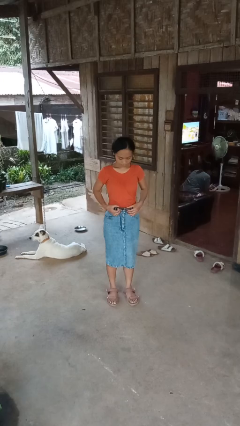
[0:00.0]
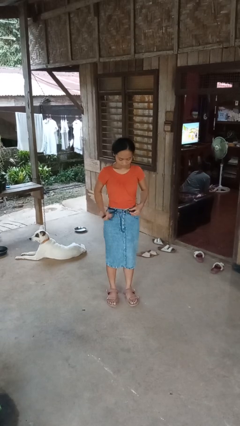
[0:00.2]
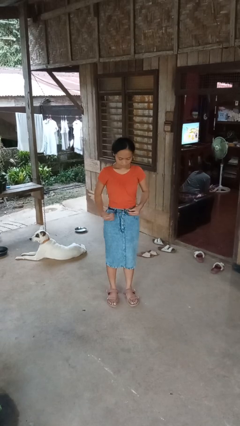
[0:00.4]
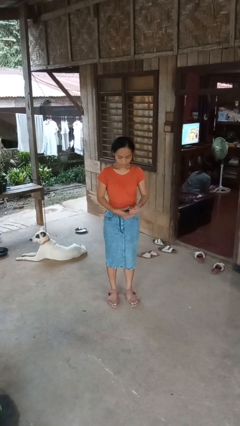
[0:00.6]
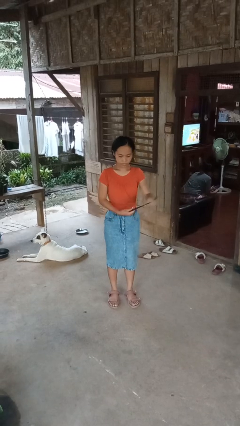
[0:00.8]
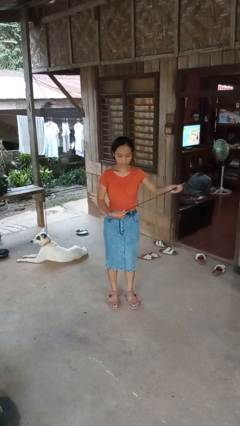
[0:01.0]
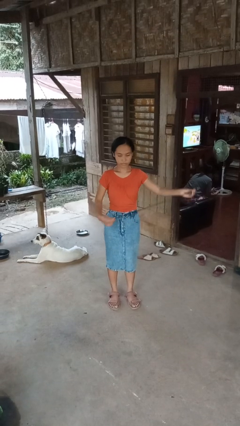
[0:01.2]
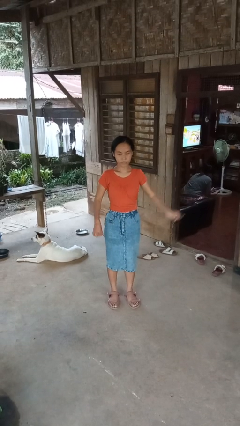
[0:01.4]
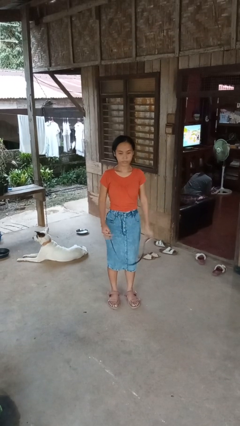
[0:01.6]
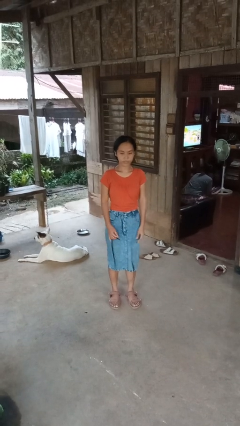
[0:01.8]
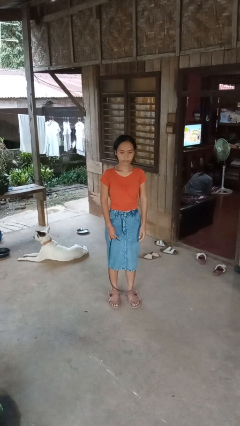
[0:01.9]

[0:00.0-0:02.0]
person takes off belt

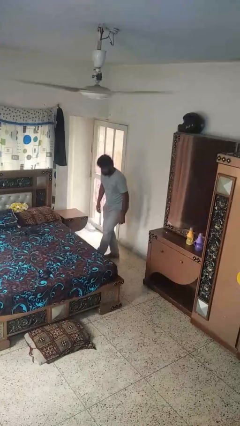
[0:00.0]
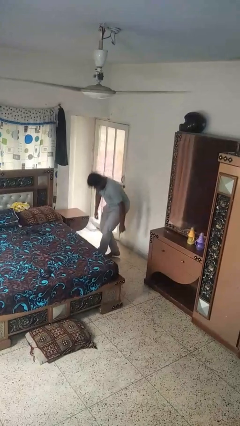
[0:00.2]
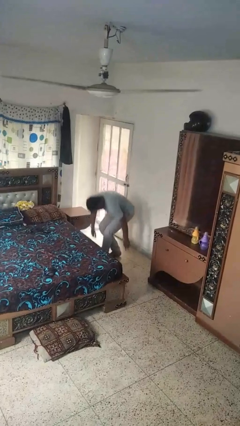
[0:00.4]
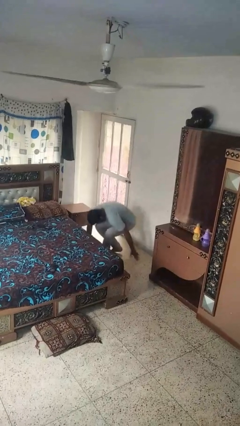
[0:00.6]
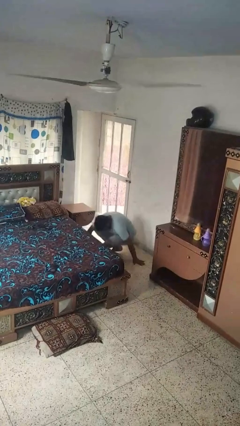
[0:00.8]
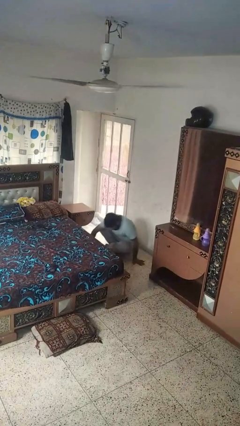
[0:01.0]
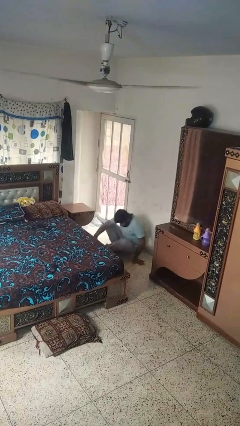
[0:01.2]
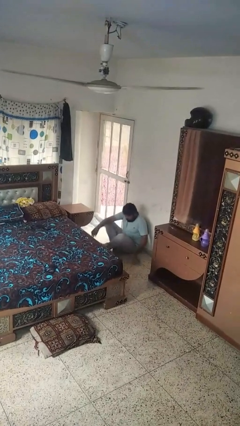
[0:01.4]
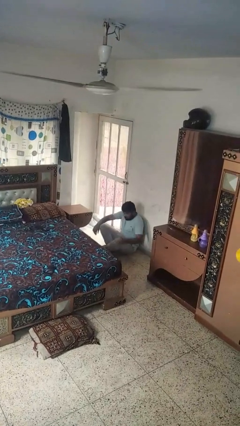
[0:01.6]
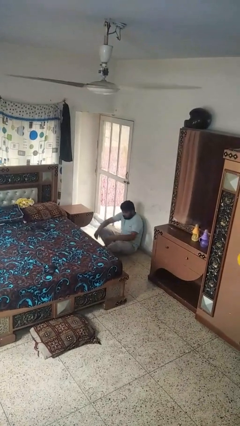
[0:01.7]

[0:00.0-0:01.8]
person sits crisscross

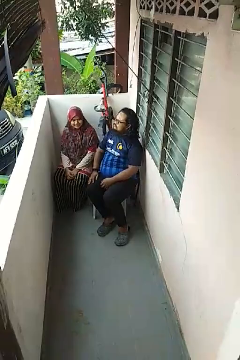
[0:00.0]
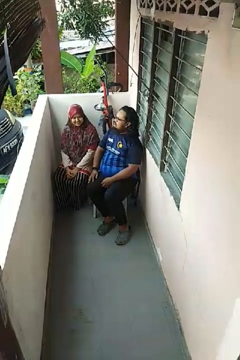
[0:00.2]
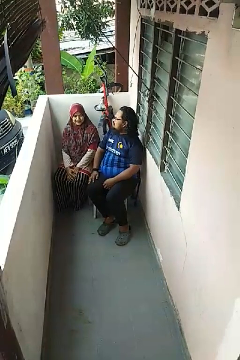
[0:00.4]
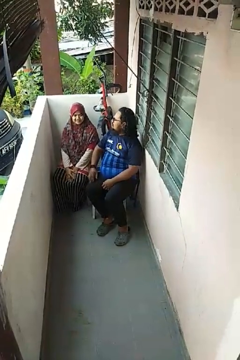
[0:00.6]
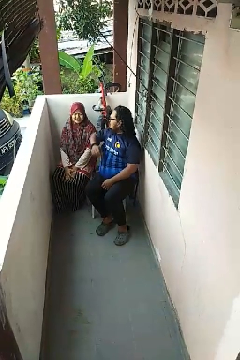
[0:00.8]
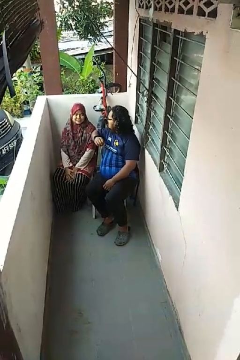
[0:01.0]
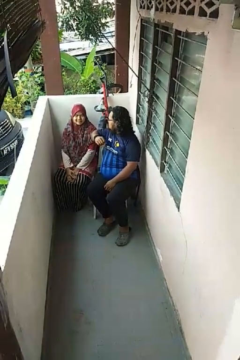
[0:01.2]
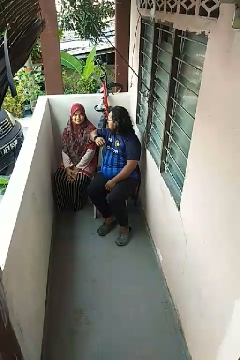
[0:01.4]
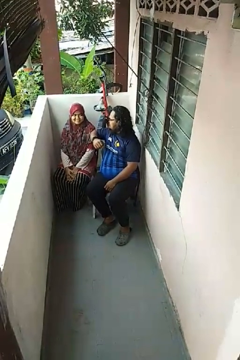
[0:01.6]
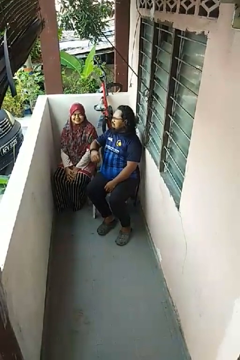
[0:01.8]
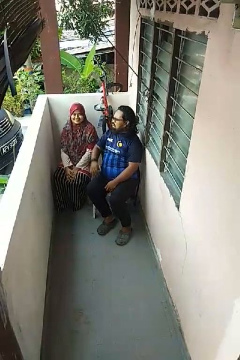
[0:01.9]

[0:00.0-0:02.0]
person nudges person with elbow

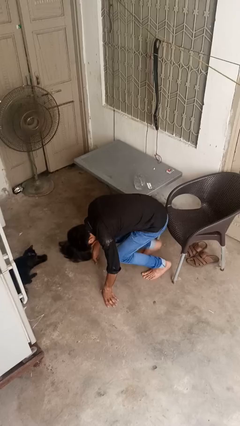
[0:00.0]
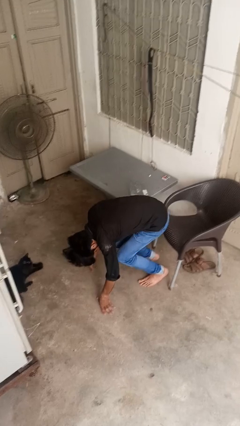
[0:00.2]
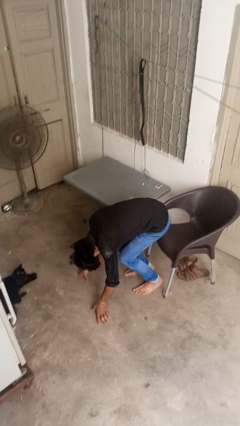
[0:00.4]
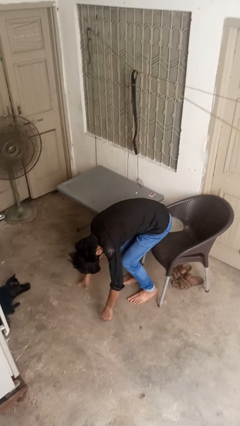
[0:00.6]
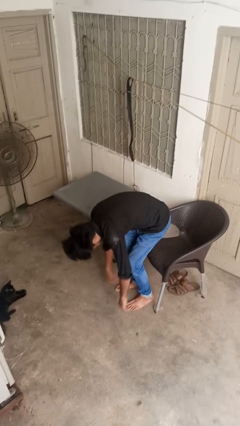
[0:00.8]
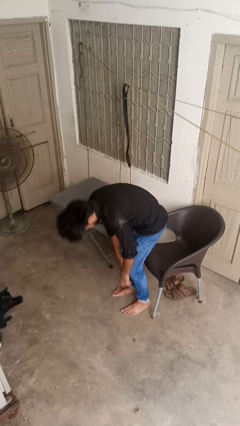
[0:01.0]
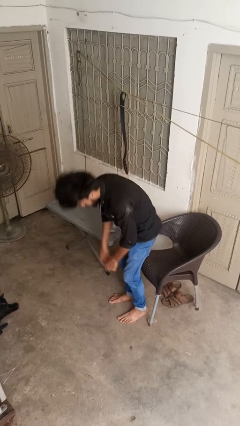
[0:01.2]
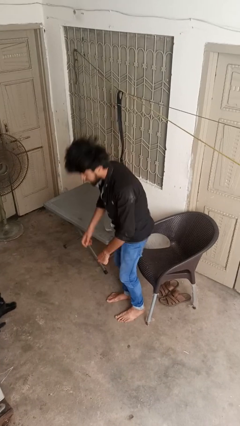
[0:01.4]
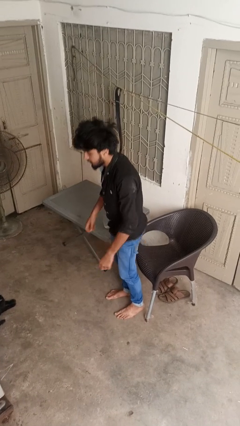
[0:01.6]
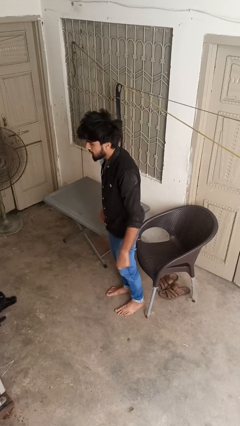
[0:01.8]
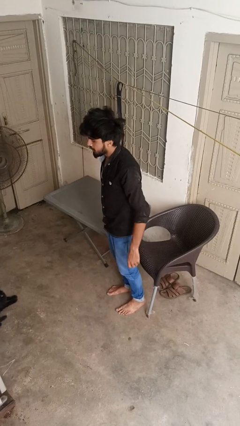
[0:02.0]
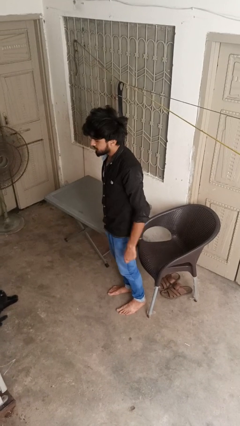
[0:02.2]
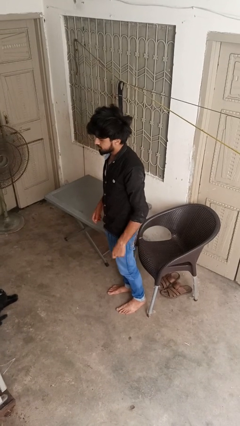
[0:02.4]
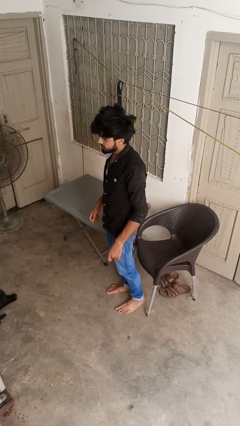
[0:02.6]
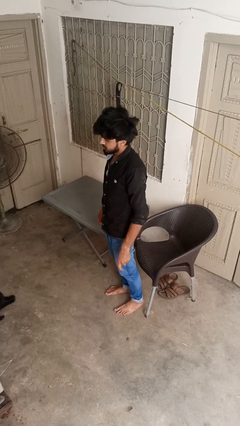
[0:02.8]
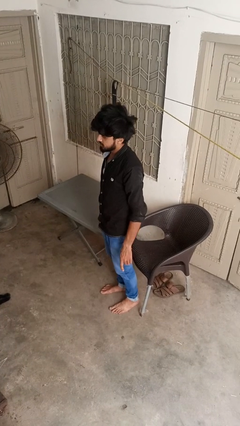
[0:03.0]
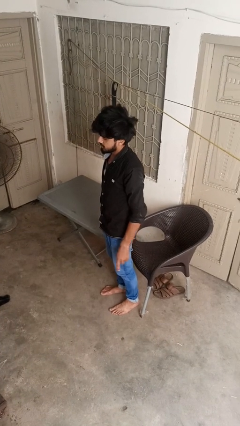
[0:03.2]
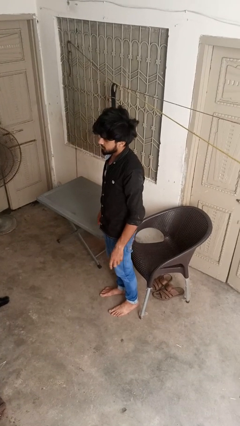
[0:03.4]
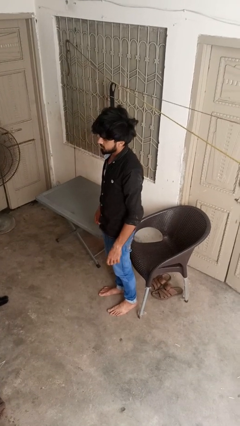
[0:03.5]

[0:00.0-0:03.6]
person stands up from floor

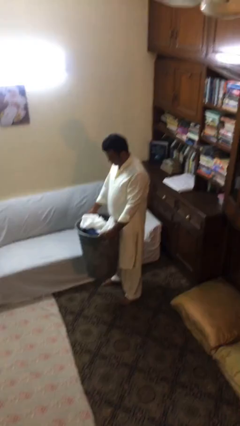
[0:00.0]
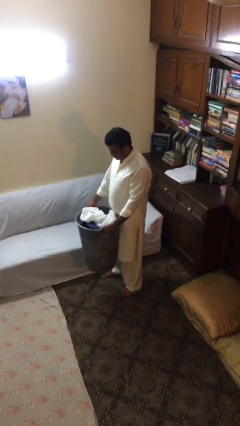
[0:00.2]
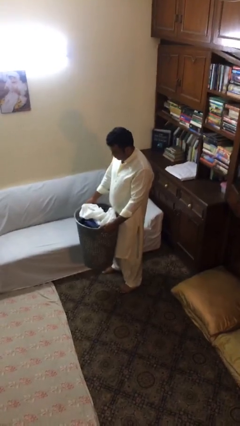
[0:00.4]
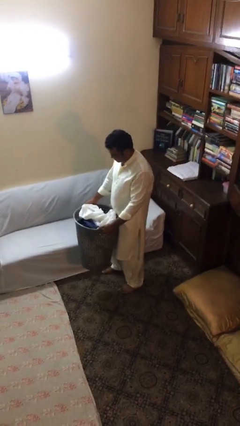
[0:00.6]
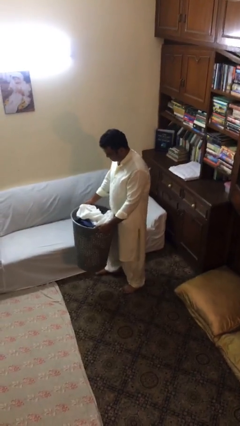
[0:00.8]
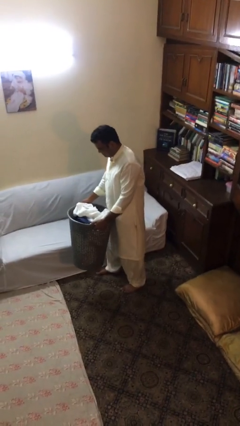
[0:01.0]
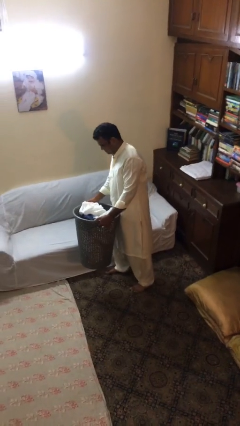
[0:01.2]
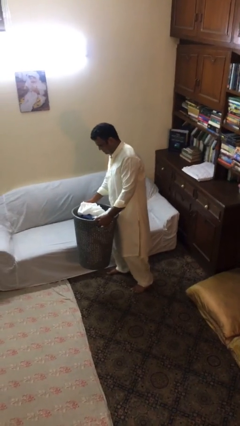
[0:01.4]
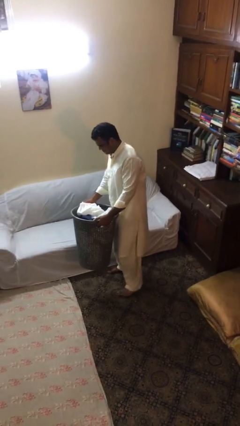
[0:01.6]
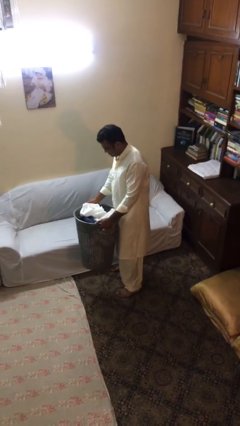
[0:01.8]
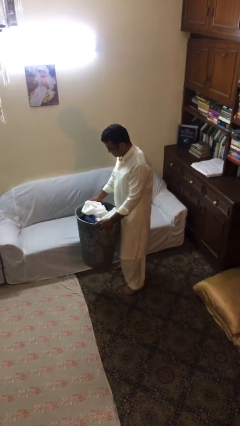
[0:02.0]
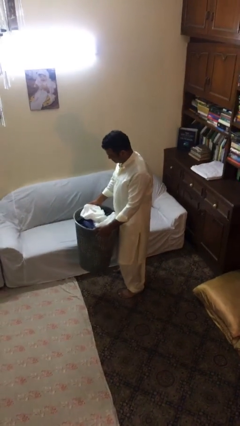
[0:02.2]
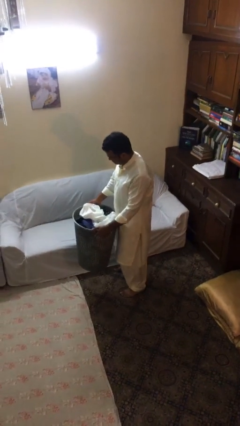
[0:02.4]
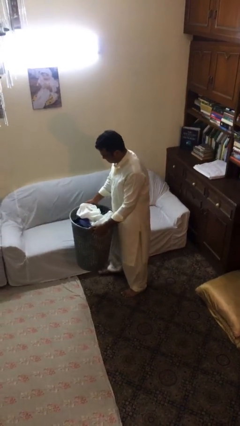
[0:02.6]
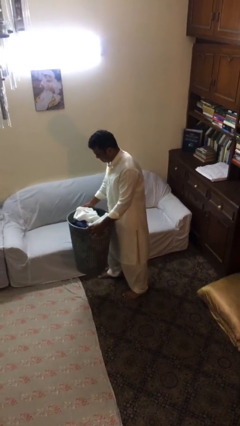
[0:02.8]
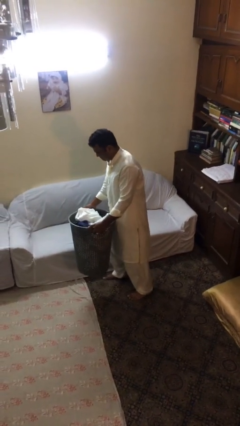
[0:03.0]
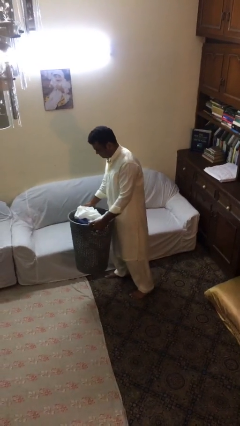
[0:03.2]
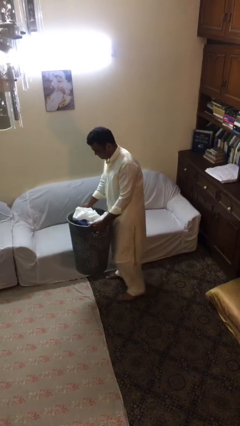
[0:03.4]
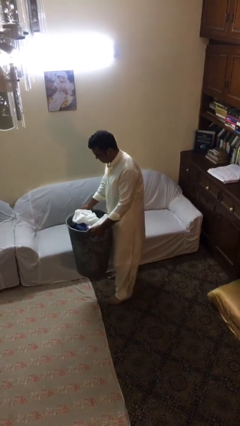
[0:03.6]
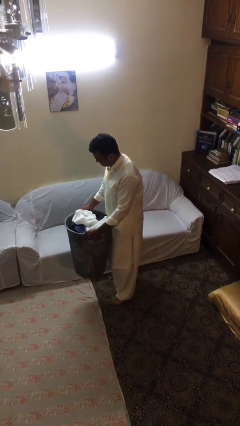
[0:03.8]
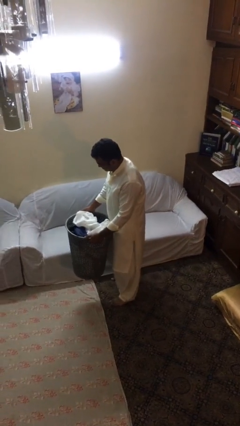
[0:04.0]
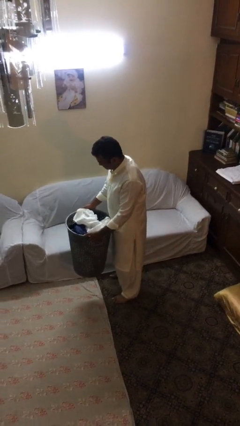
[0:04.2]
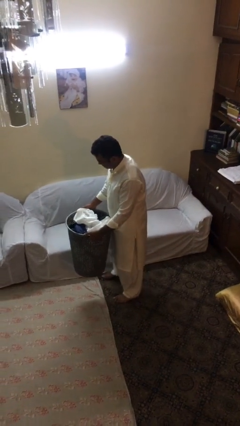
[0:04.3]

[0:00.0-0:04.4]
person carries heavy object

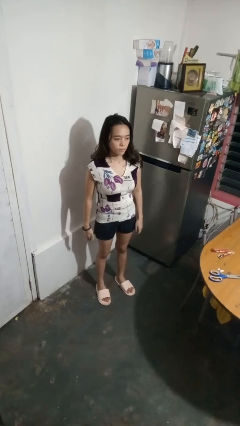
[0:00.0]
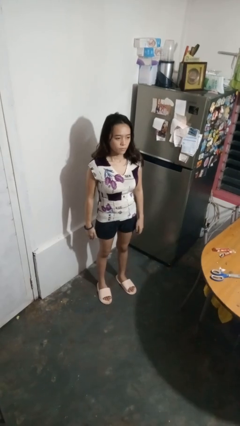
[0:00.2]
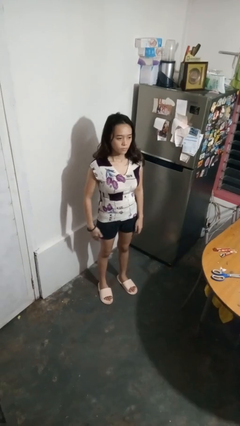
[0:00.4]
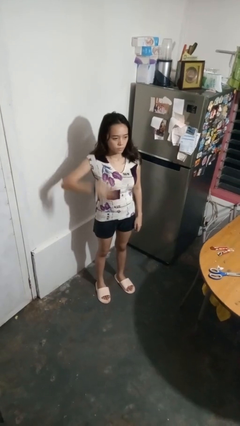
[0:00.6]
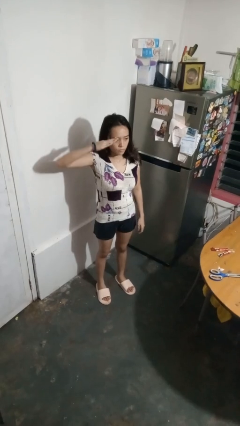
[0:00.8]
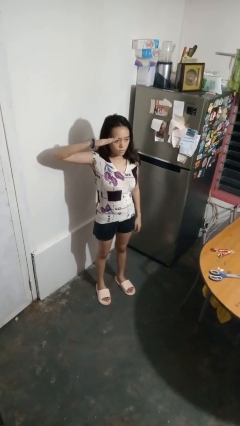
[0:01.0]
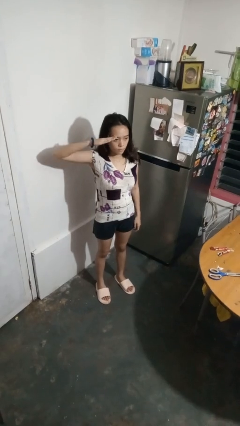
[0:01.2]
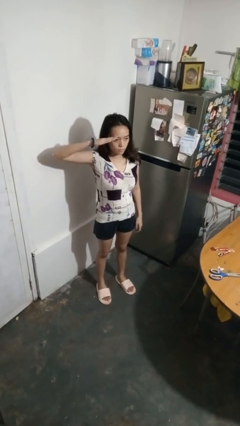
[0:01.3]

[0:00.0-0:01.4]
person salutes

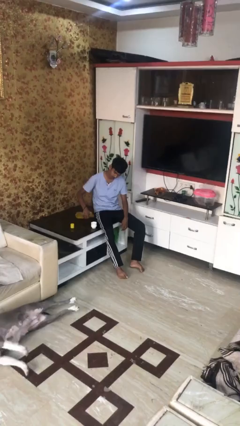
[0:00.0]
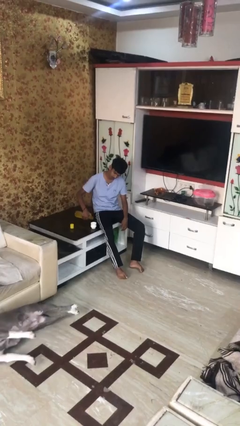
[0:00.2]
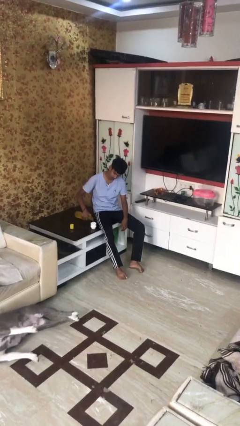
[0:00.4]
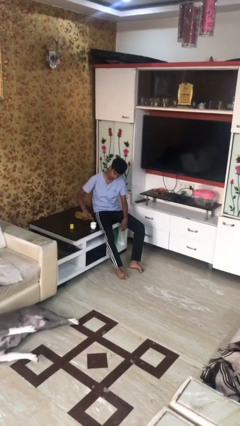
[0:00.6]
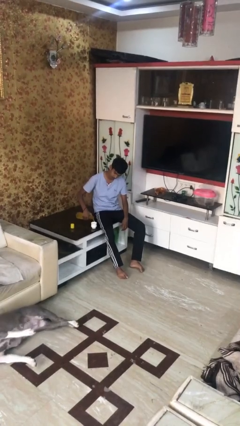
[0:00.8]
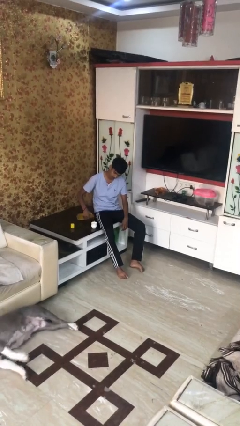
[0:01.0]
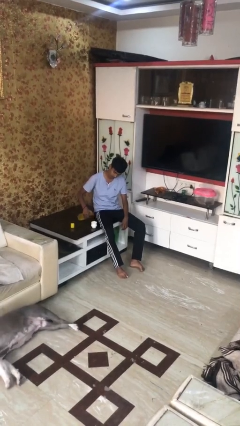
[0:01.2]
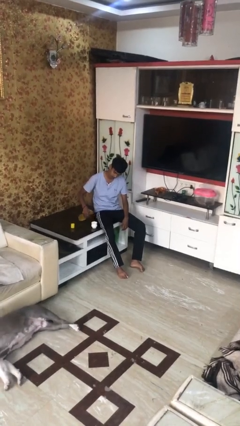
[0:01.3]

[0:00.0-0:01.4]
person pours liquid into cup

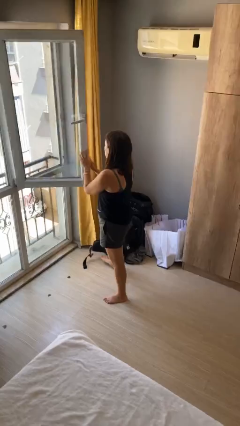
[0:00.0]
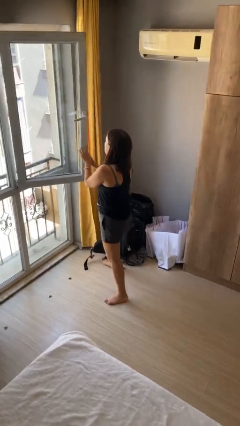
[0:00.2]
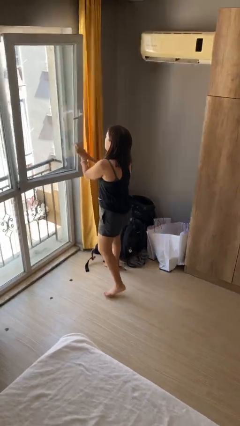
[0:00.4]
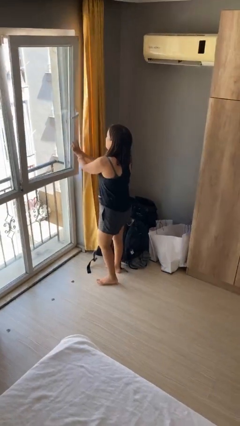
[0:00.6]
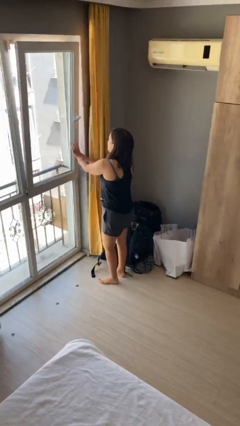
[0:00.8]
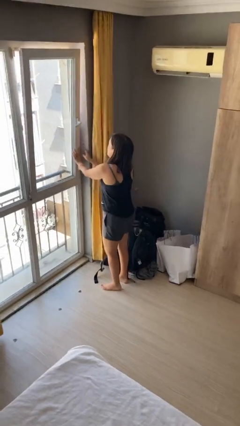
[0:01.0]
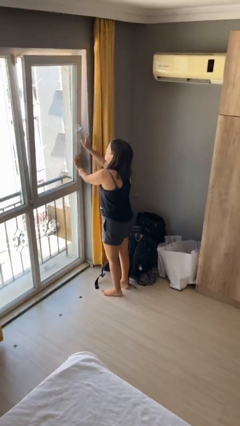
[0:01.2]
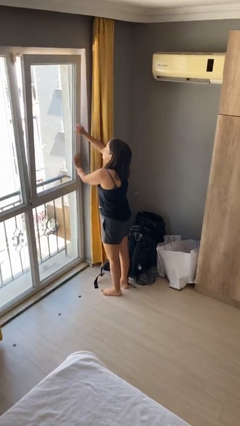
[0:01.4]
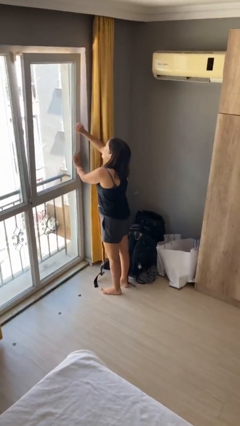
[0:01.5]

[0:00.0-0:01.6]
person closes home window
